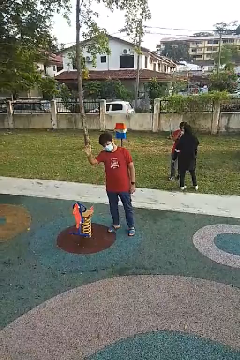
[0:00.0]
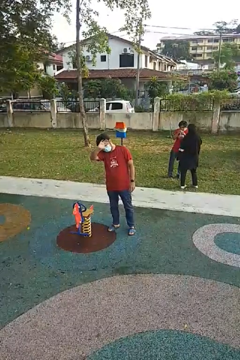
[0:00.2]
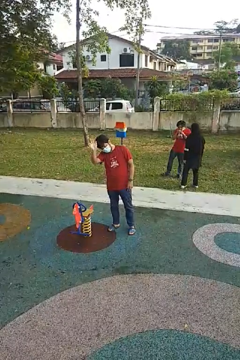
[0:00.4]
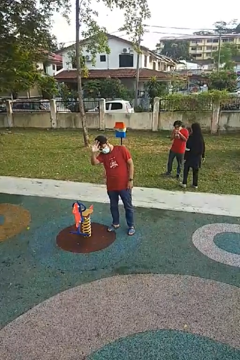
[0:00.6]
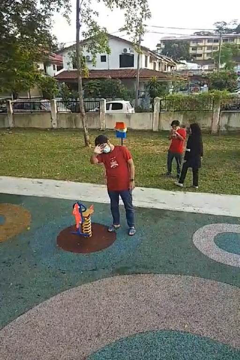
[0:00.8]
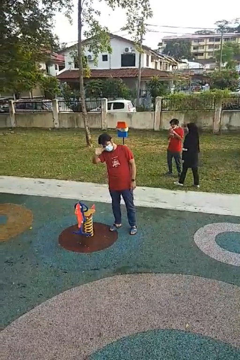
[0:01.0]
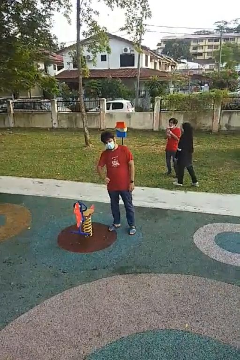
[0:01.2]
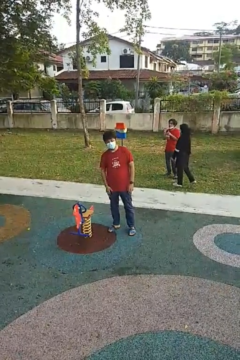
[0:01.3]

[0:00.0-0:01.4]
person waves at person

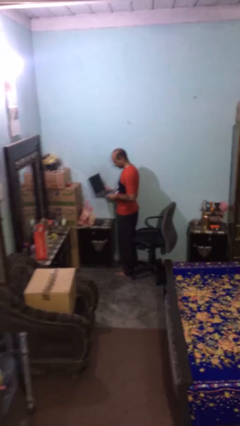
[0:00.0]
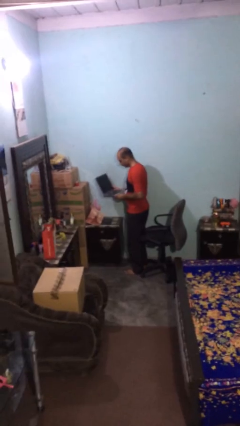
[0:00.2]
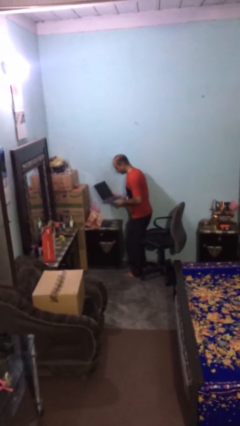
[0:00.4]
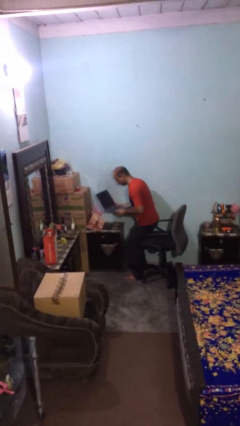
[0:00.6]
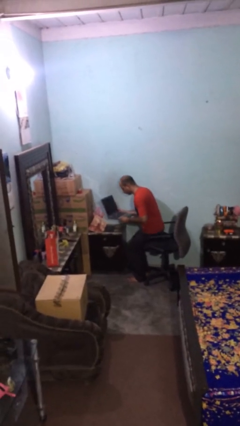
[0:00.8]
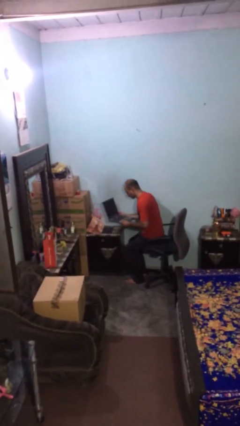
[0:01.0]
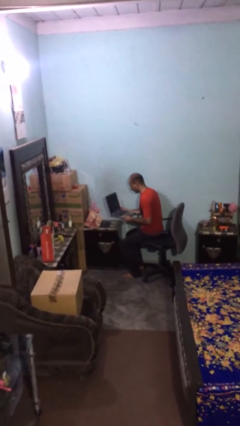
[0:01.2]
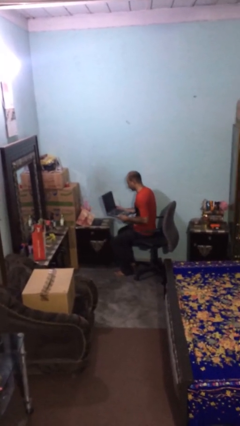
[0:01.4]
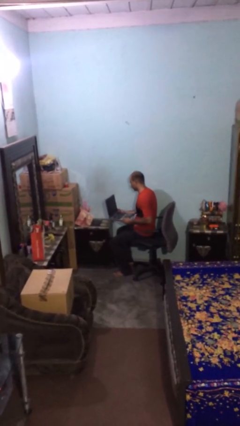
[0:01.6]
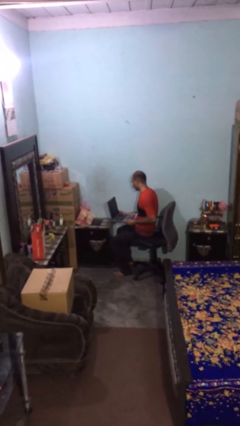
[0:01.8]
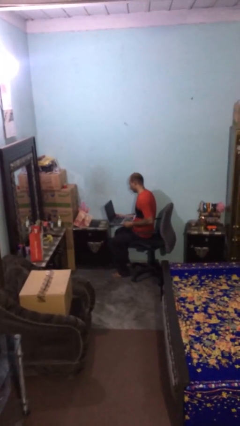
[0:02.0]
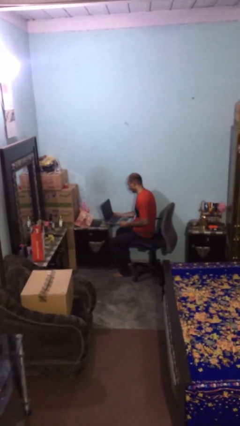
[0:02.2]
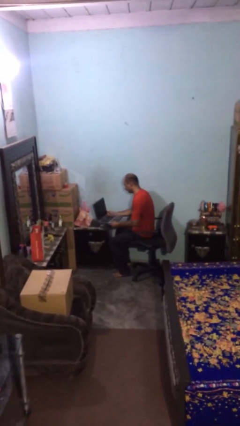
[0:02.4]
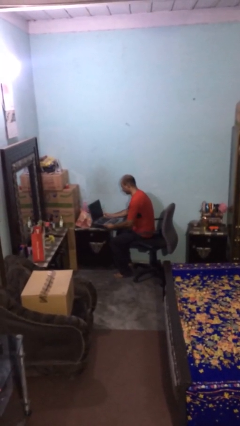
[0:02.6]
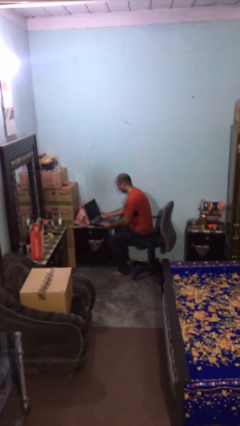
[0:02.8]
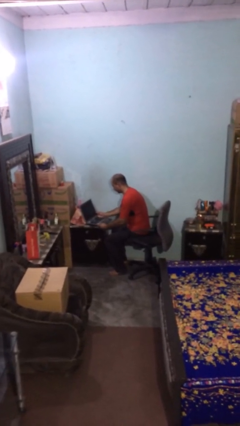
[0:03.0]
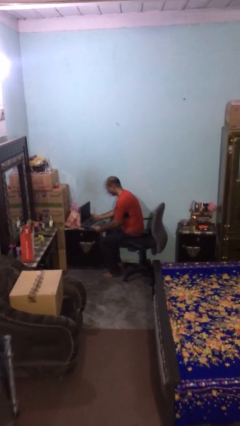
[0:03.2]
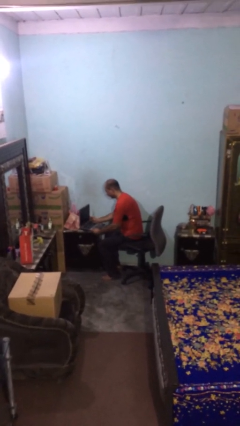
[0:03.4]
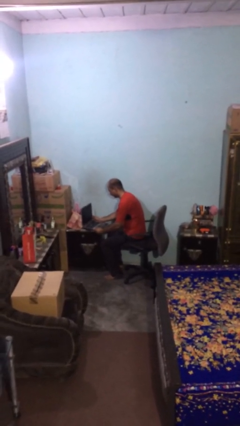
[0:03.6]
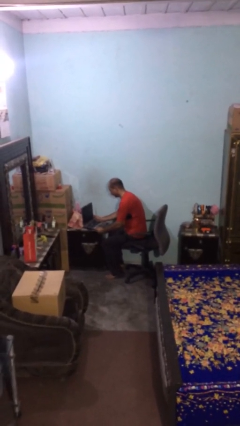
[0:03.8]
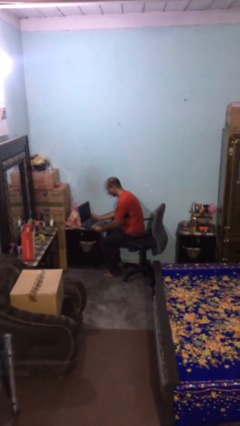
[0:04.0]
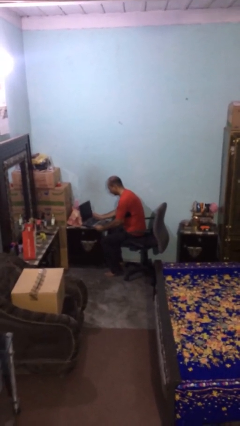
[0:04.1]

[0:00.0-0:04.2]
person sits down

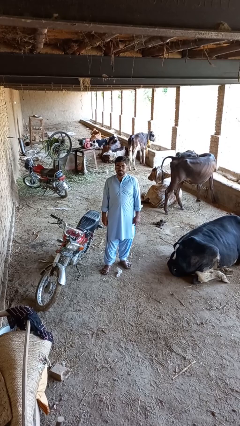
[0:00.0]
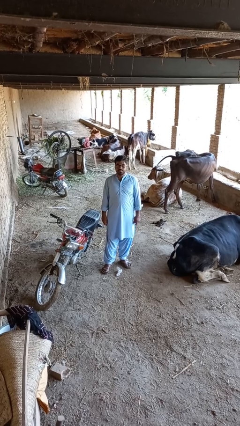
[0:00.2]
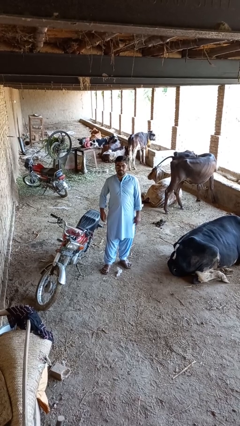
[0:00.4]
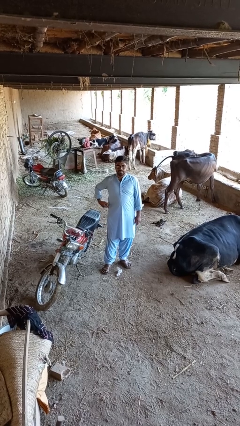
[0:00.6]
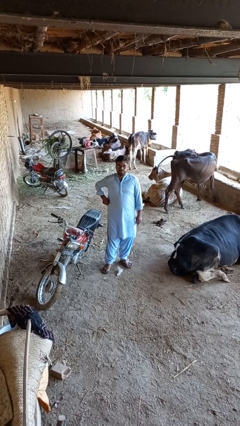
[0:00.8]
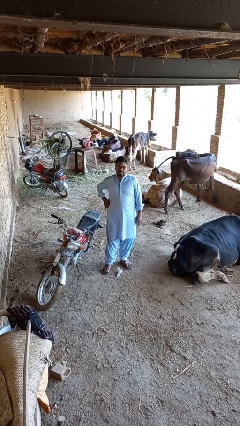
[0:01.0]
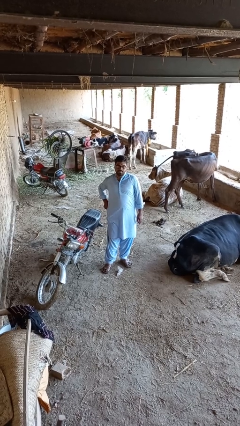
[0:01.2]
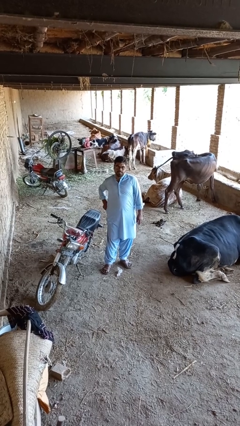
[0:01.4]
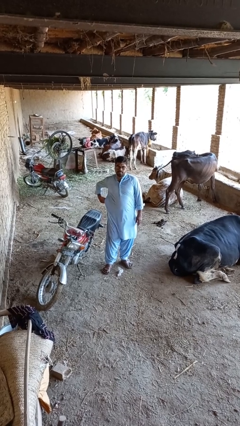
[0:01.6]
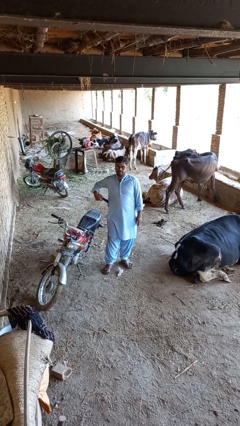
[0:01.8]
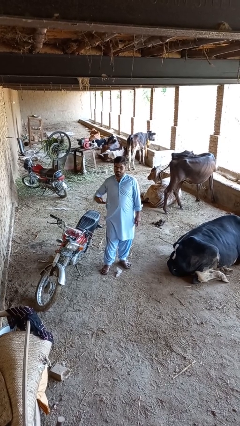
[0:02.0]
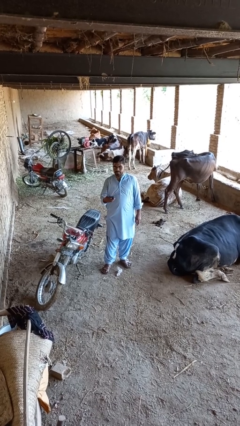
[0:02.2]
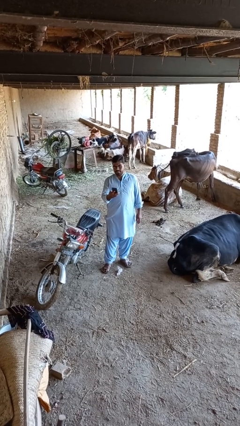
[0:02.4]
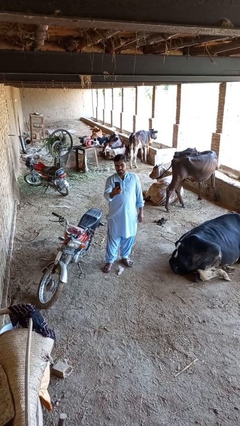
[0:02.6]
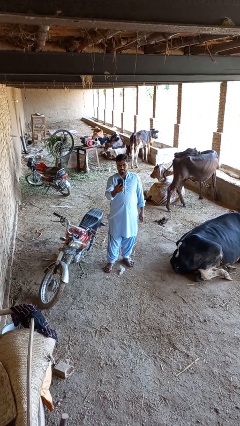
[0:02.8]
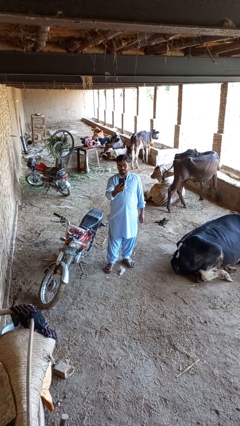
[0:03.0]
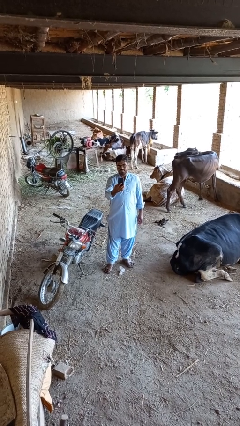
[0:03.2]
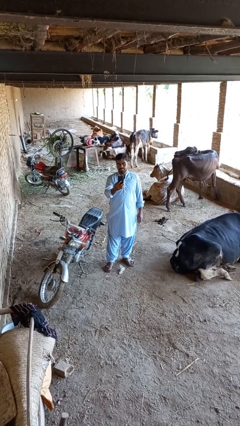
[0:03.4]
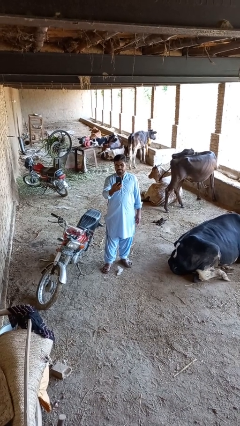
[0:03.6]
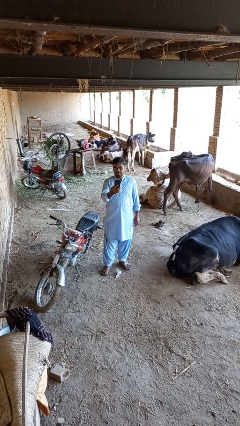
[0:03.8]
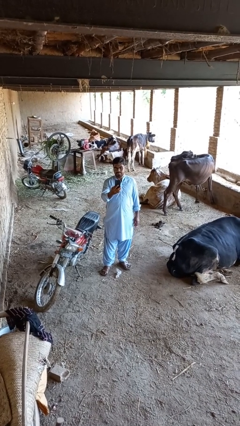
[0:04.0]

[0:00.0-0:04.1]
person takes phone from pocket

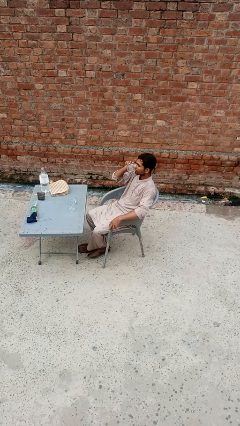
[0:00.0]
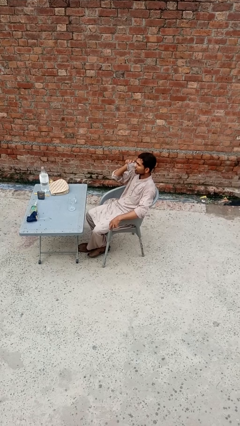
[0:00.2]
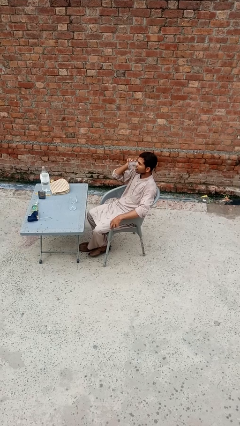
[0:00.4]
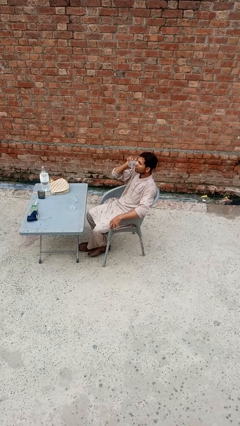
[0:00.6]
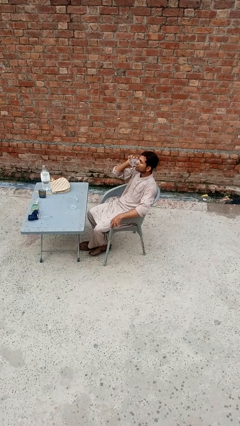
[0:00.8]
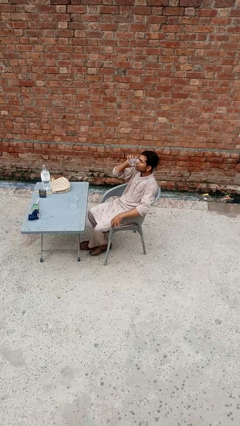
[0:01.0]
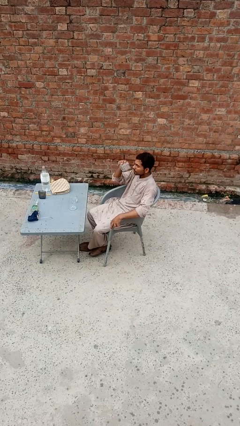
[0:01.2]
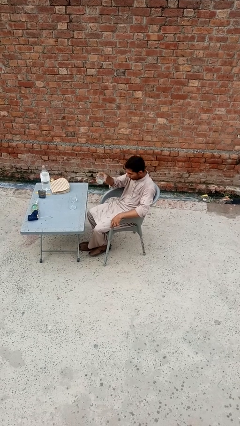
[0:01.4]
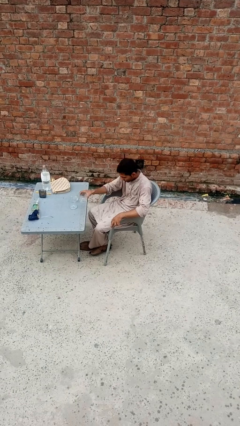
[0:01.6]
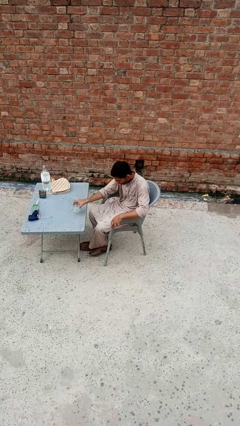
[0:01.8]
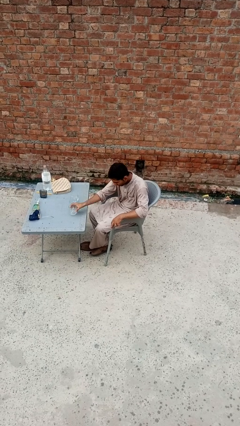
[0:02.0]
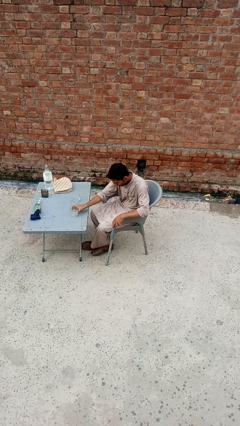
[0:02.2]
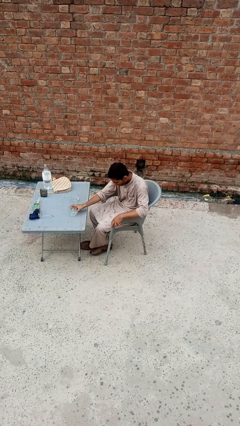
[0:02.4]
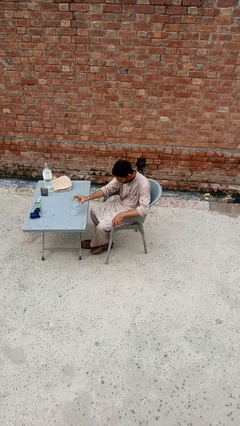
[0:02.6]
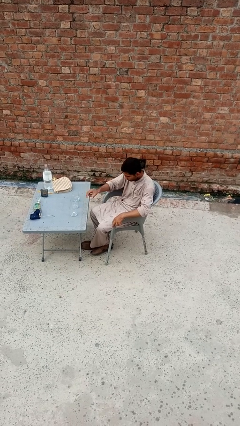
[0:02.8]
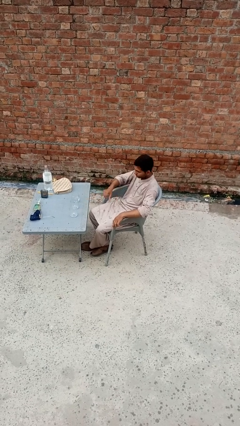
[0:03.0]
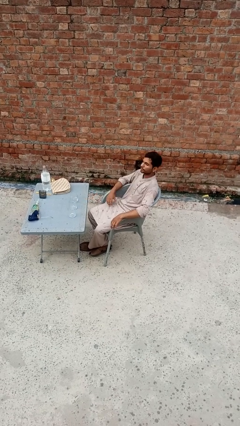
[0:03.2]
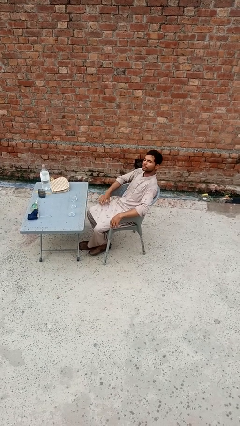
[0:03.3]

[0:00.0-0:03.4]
person puts down object on table

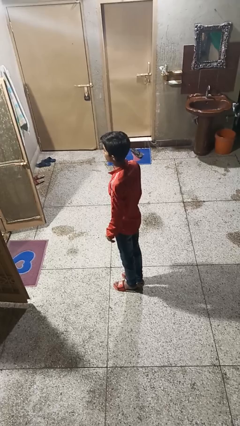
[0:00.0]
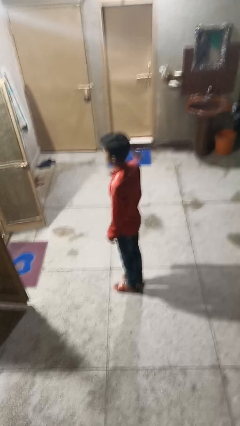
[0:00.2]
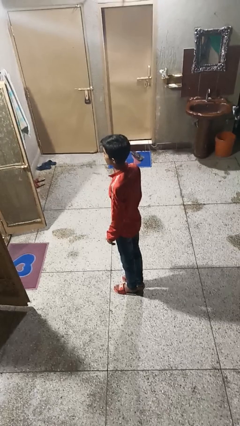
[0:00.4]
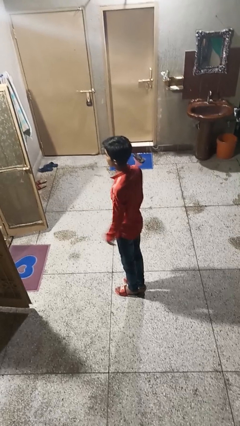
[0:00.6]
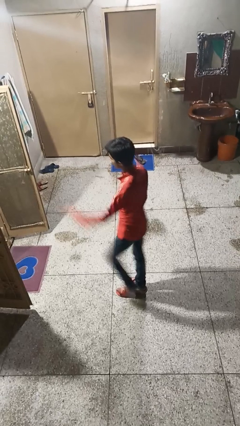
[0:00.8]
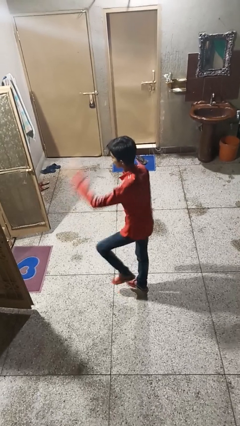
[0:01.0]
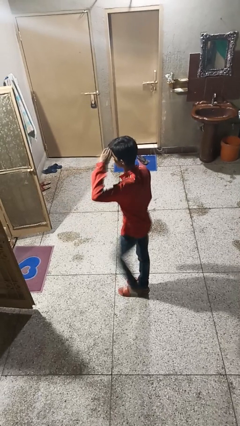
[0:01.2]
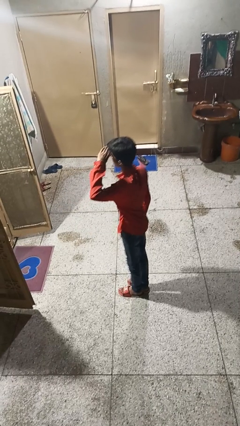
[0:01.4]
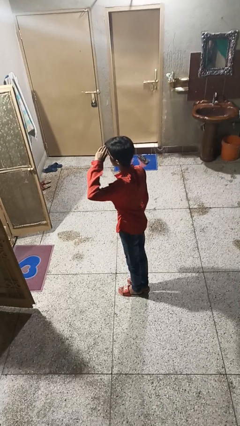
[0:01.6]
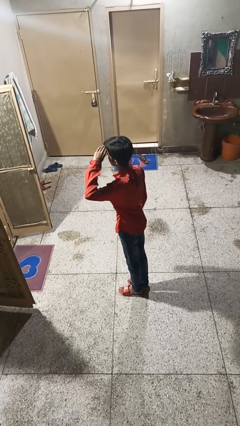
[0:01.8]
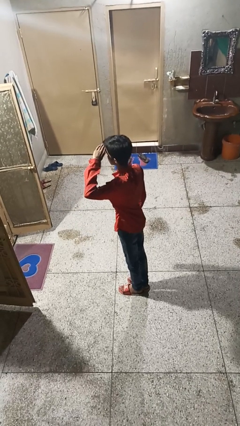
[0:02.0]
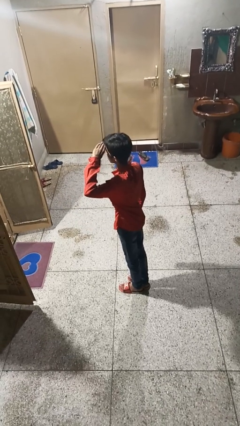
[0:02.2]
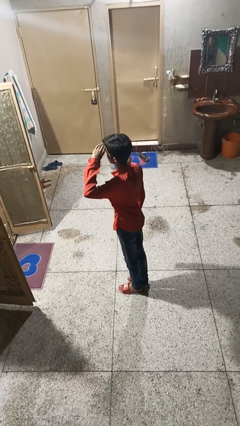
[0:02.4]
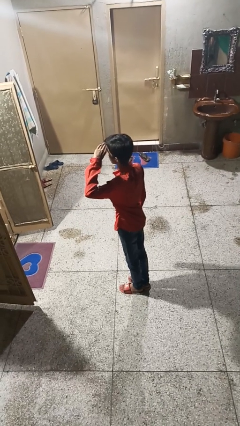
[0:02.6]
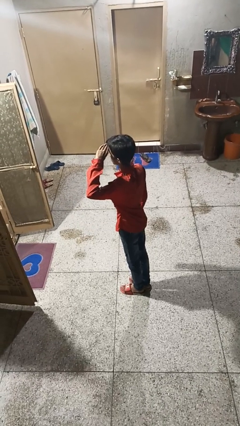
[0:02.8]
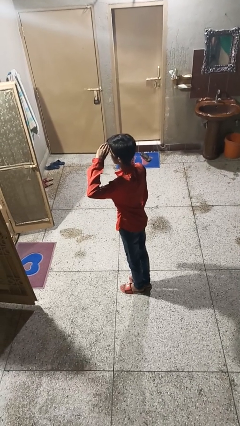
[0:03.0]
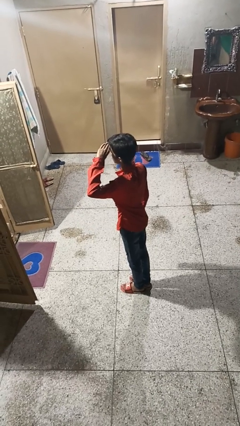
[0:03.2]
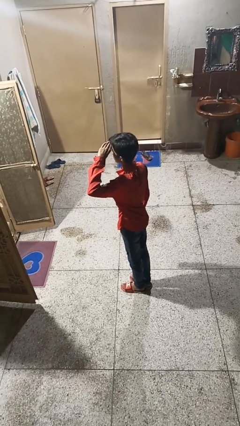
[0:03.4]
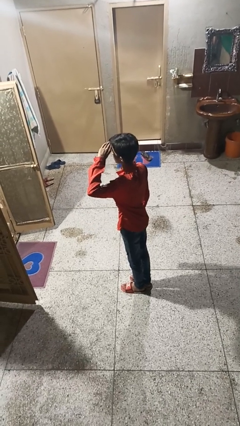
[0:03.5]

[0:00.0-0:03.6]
person salutes

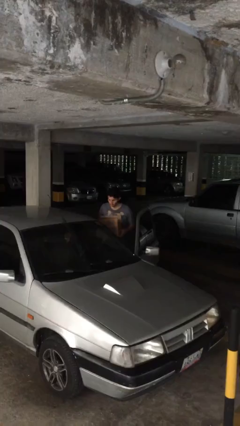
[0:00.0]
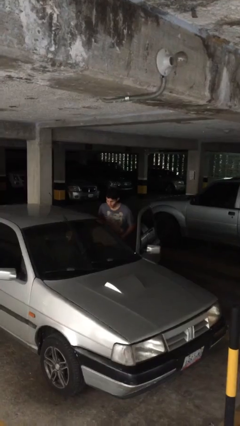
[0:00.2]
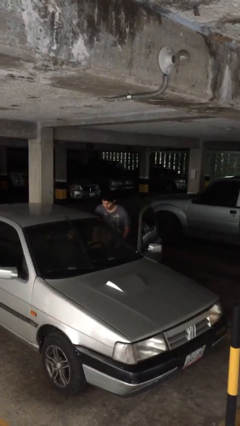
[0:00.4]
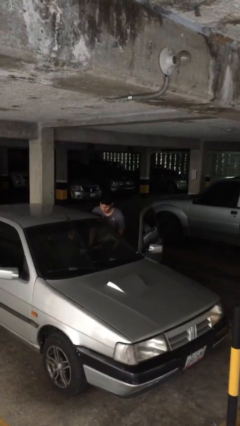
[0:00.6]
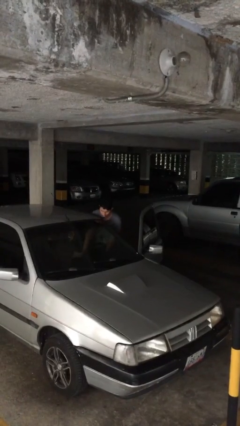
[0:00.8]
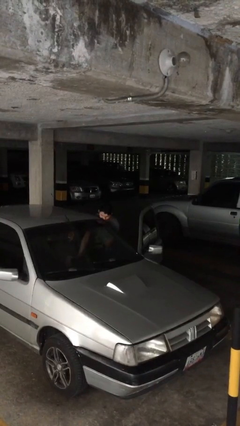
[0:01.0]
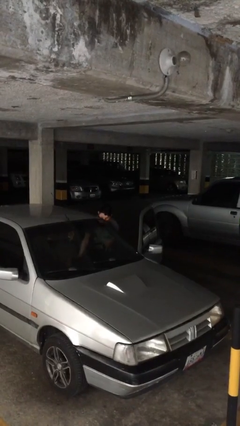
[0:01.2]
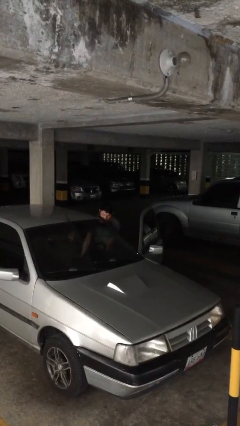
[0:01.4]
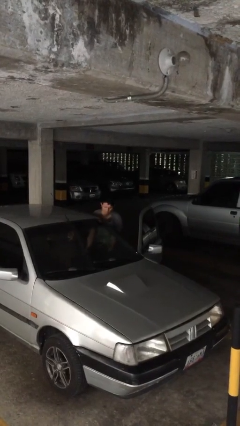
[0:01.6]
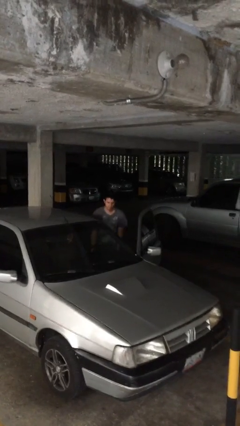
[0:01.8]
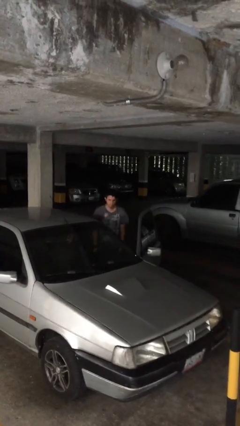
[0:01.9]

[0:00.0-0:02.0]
person loads car
